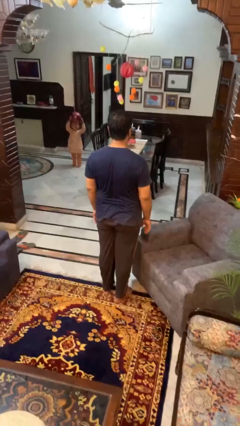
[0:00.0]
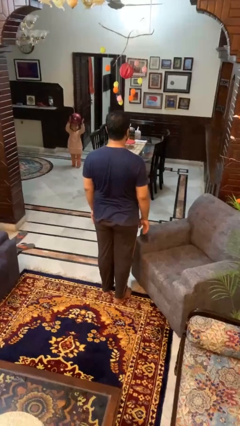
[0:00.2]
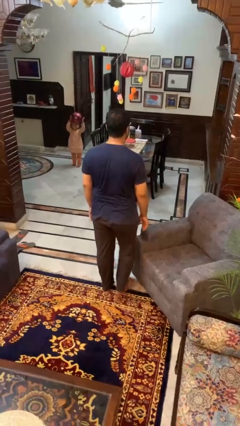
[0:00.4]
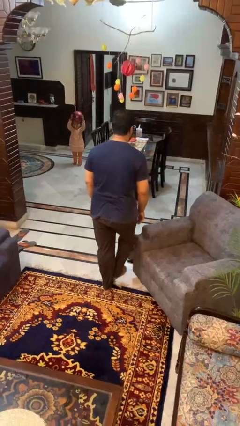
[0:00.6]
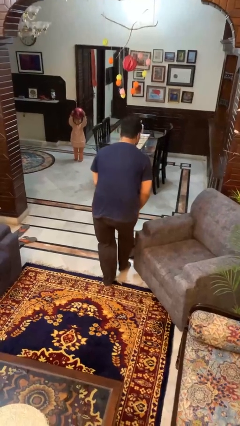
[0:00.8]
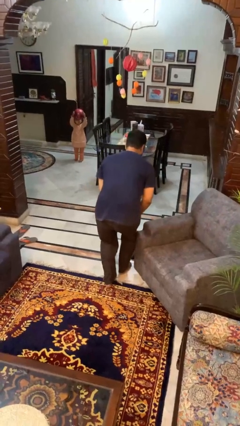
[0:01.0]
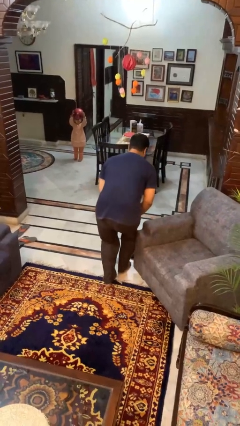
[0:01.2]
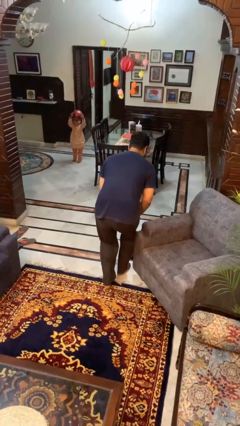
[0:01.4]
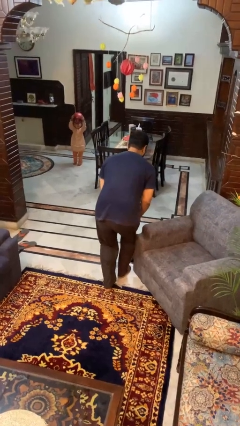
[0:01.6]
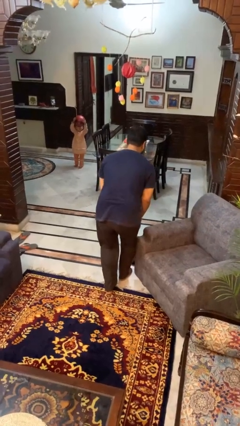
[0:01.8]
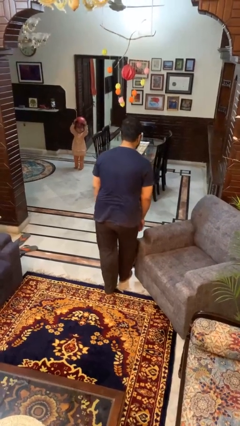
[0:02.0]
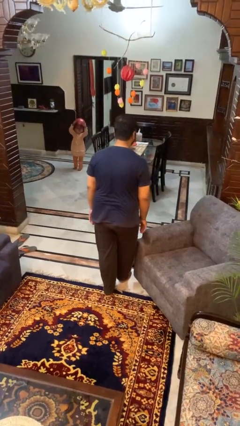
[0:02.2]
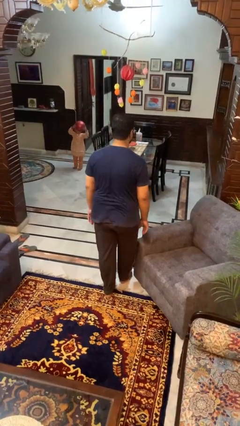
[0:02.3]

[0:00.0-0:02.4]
person stubs toe

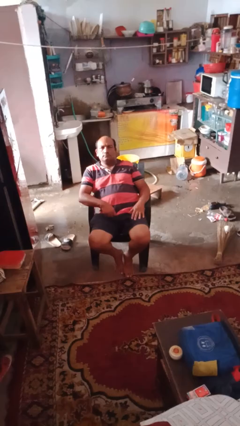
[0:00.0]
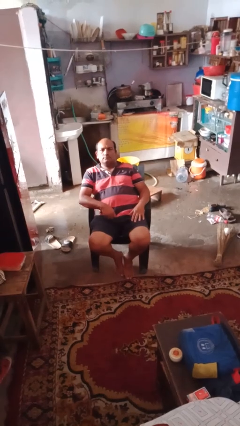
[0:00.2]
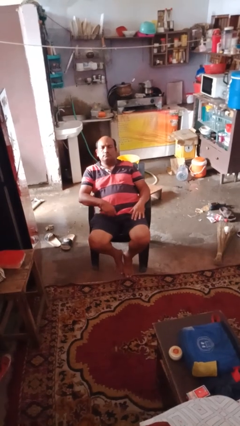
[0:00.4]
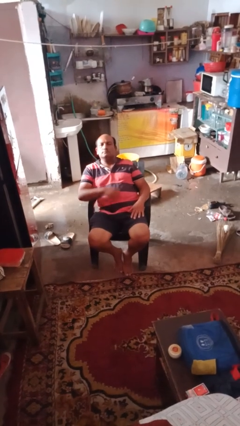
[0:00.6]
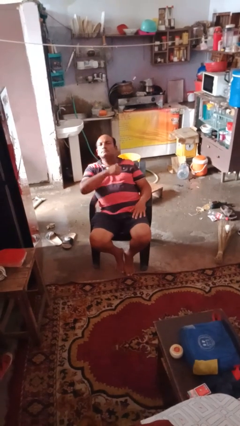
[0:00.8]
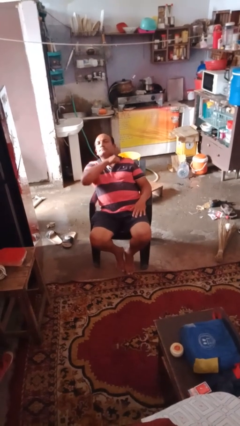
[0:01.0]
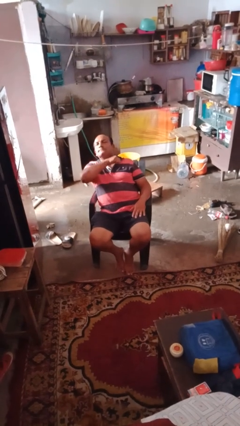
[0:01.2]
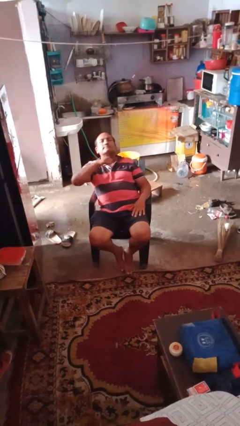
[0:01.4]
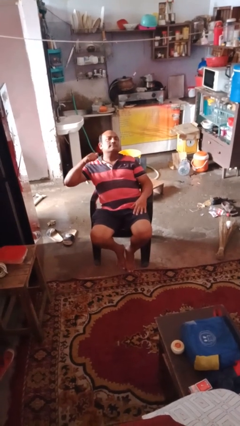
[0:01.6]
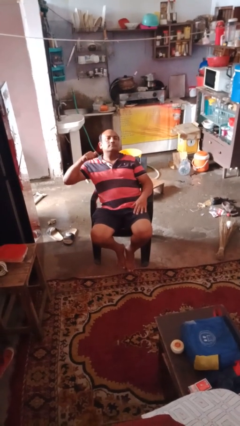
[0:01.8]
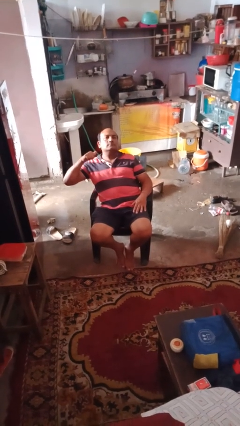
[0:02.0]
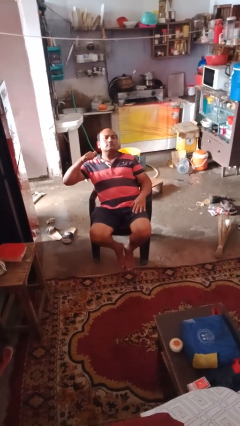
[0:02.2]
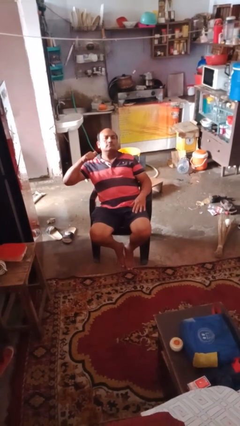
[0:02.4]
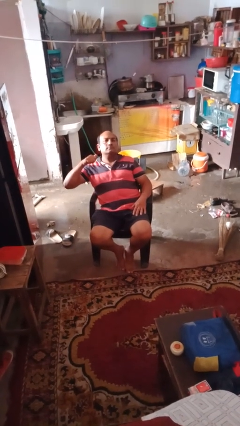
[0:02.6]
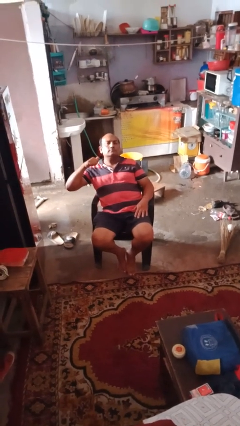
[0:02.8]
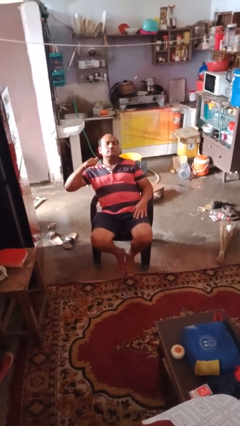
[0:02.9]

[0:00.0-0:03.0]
person gestures cut

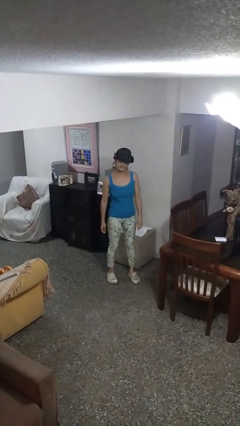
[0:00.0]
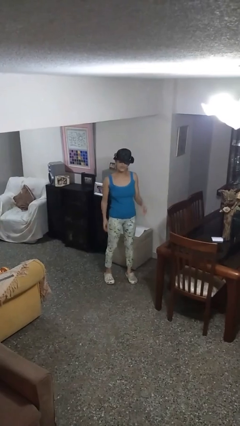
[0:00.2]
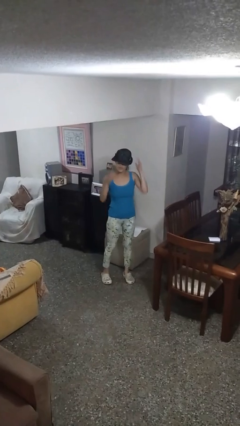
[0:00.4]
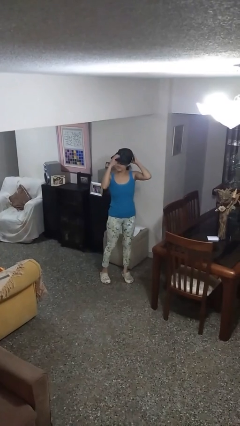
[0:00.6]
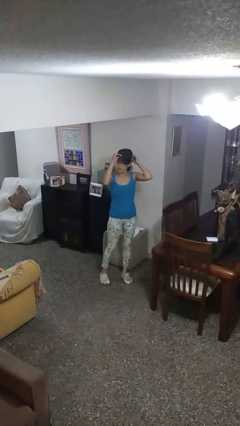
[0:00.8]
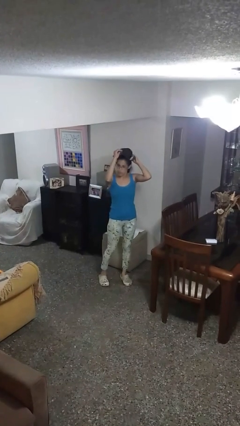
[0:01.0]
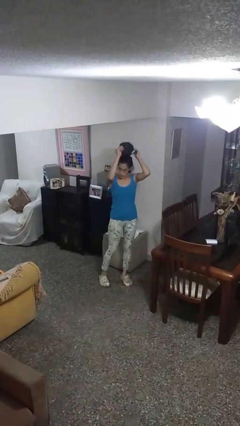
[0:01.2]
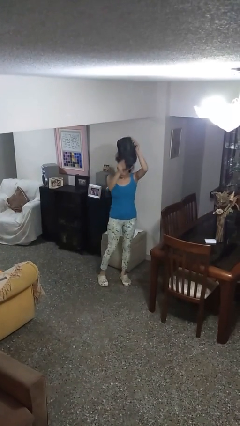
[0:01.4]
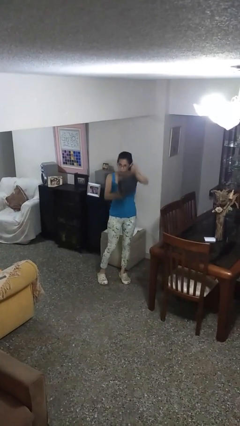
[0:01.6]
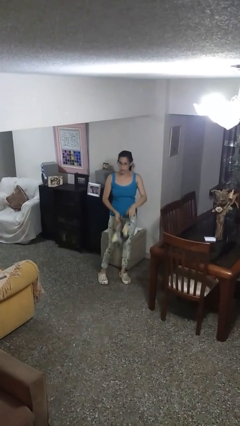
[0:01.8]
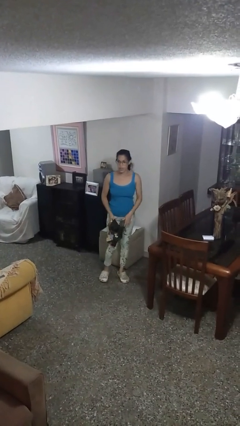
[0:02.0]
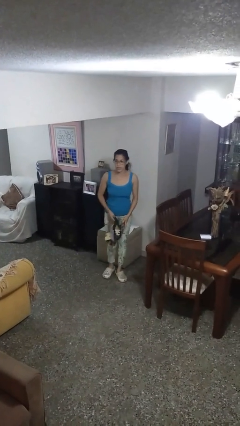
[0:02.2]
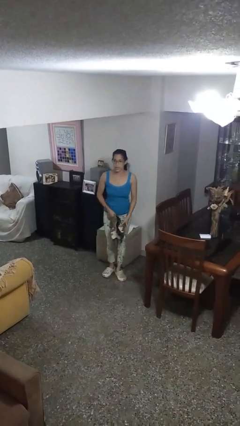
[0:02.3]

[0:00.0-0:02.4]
person takes off hat

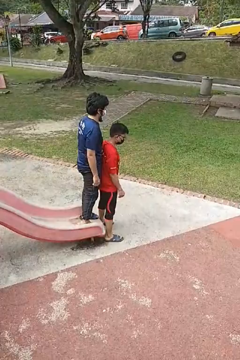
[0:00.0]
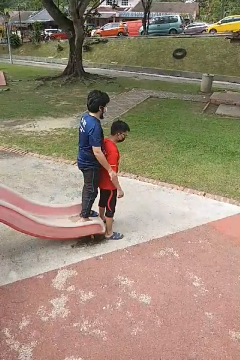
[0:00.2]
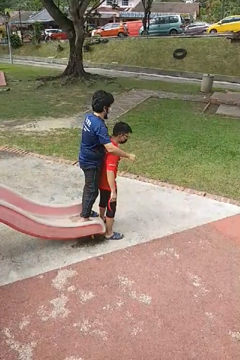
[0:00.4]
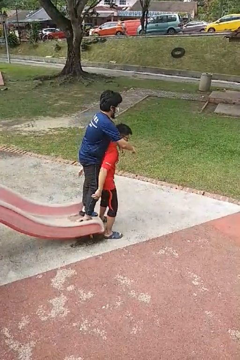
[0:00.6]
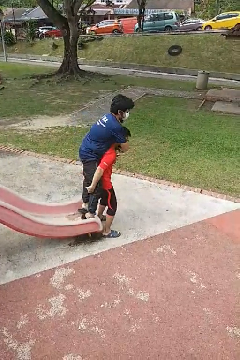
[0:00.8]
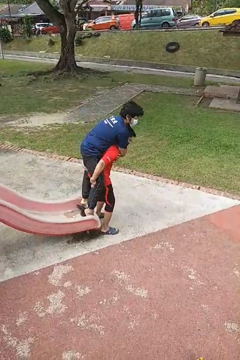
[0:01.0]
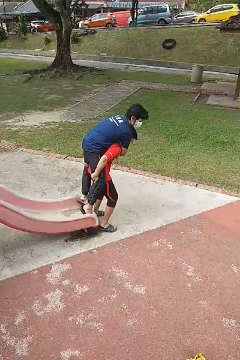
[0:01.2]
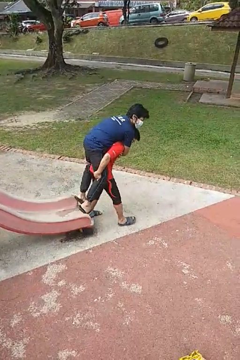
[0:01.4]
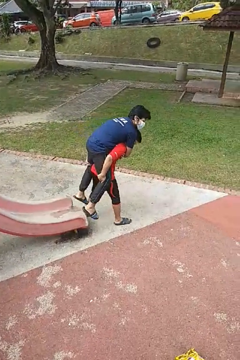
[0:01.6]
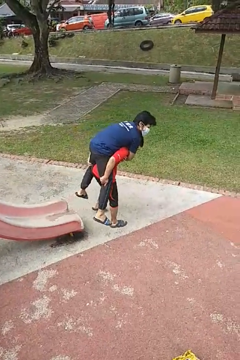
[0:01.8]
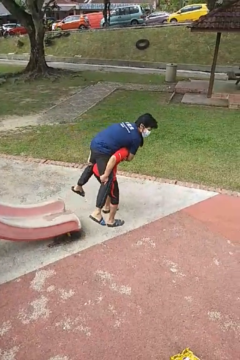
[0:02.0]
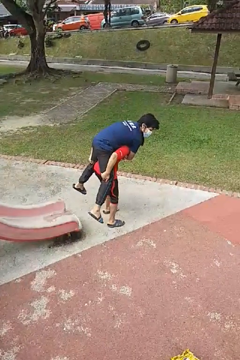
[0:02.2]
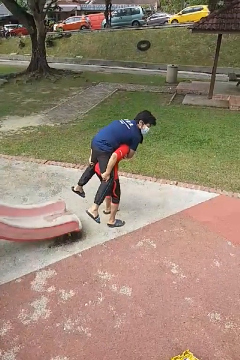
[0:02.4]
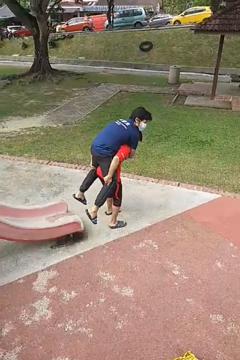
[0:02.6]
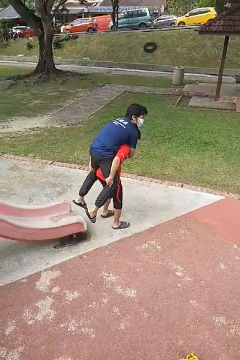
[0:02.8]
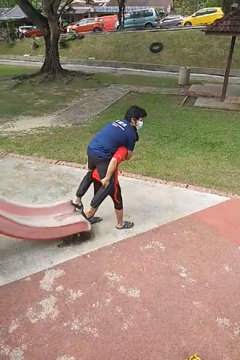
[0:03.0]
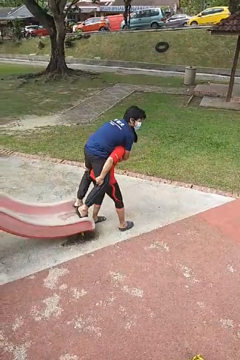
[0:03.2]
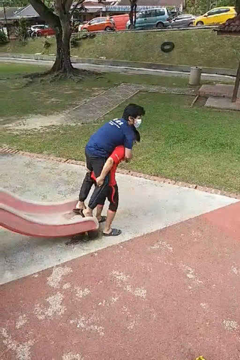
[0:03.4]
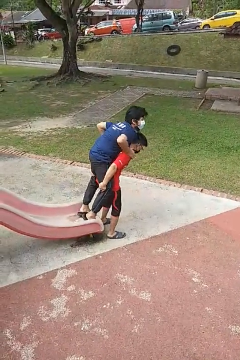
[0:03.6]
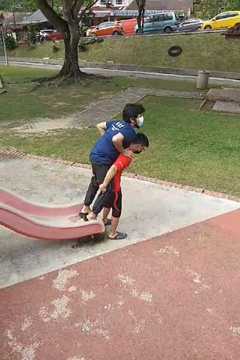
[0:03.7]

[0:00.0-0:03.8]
person carries person on back

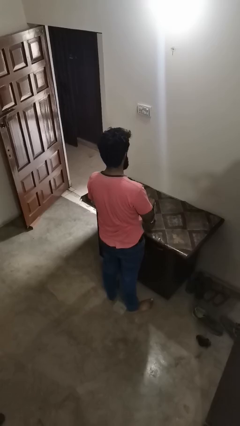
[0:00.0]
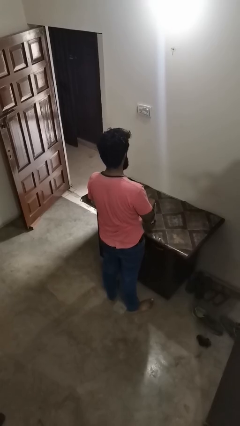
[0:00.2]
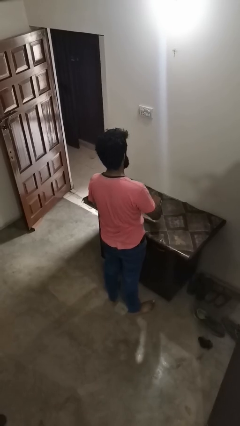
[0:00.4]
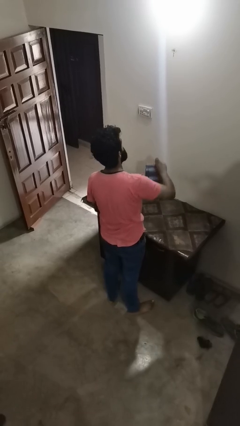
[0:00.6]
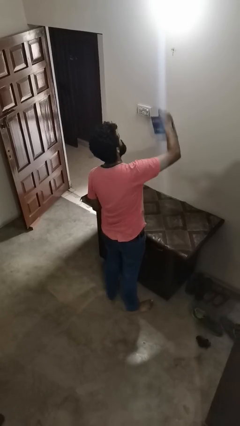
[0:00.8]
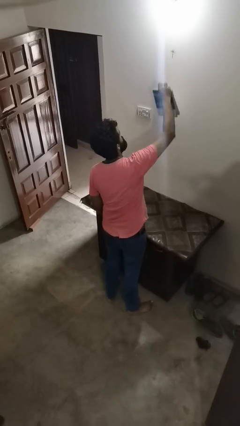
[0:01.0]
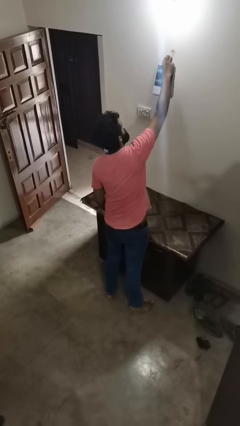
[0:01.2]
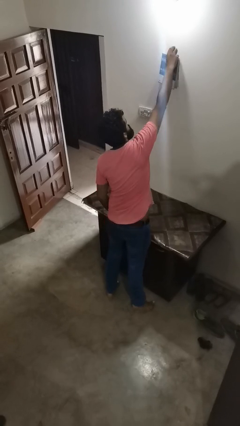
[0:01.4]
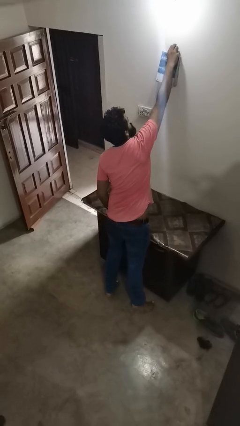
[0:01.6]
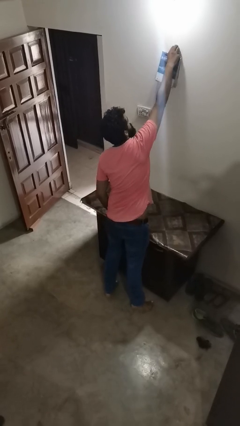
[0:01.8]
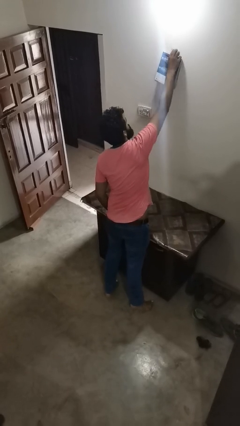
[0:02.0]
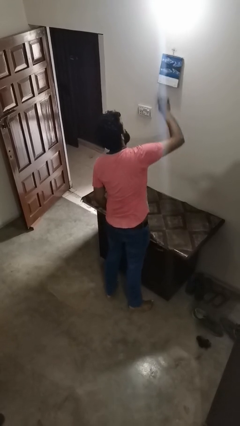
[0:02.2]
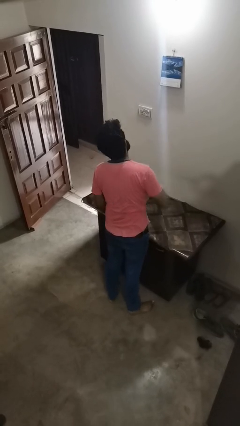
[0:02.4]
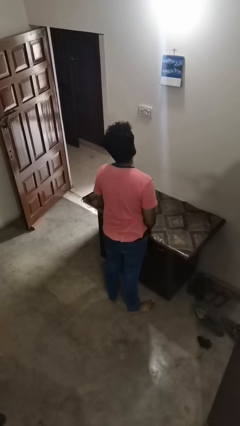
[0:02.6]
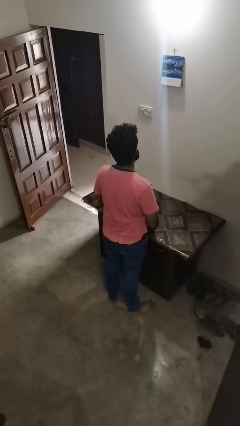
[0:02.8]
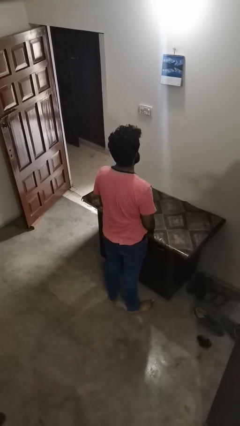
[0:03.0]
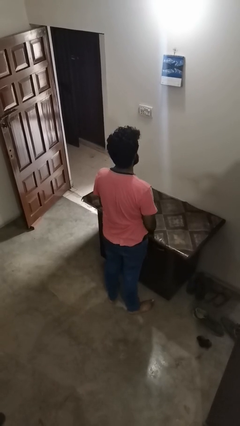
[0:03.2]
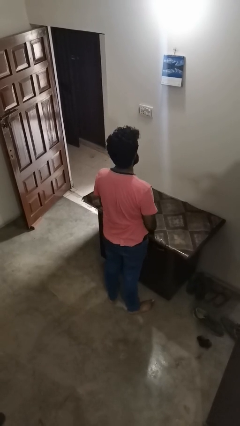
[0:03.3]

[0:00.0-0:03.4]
person puts up picture frame

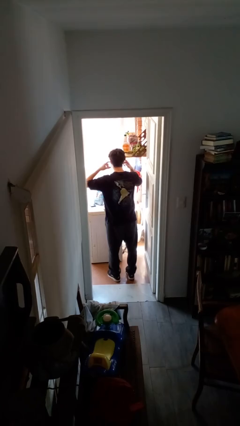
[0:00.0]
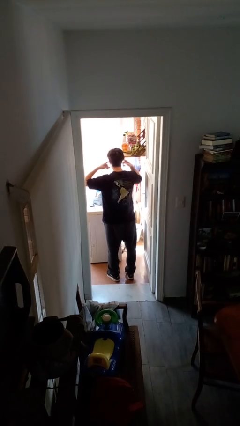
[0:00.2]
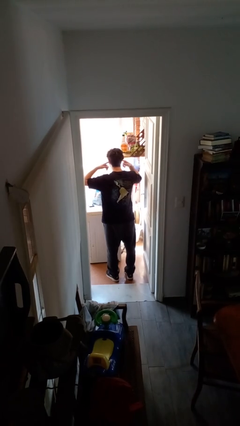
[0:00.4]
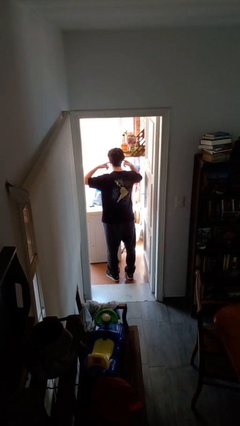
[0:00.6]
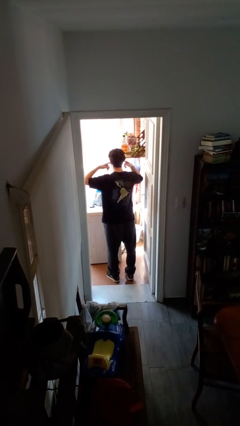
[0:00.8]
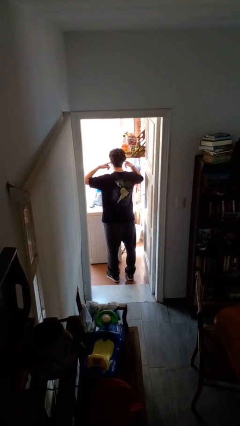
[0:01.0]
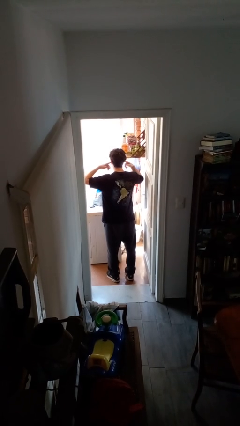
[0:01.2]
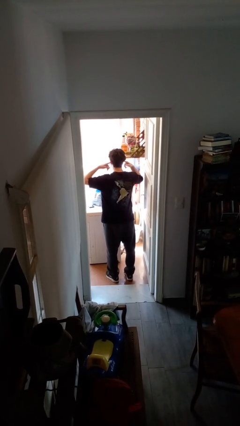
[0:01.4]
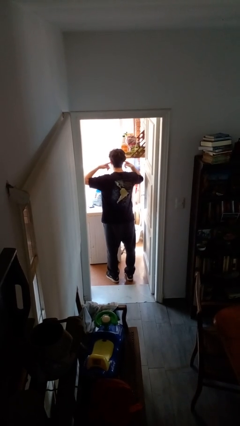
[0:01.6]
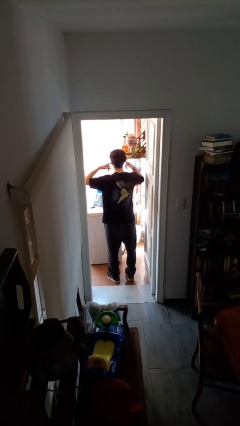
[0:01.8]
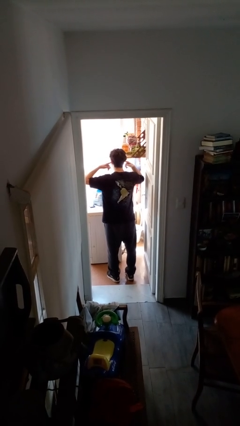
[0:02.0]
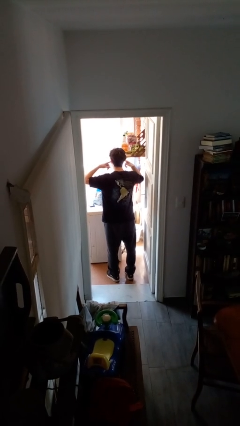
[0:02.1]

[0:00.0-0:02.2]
person puts fingers in ear

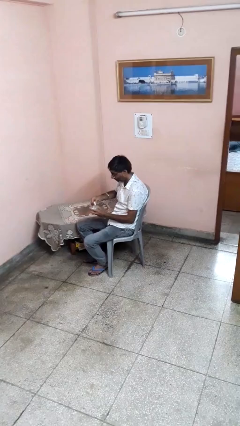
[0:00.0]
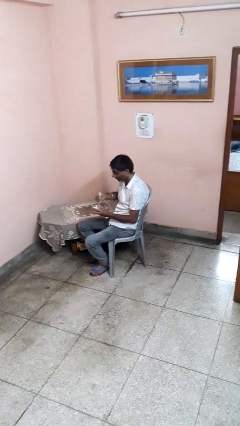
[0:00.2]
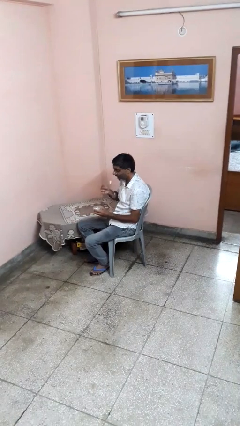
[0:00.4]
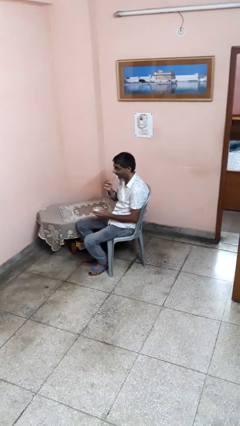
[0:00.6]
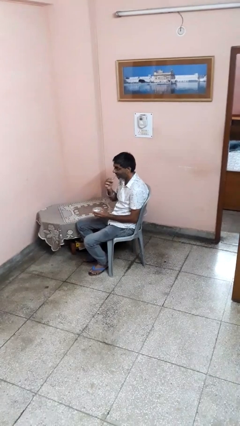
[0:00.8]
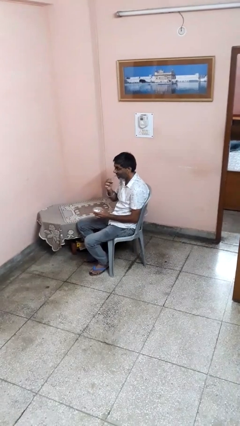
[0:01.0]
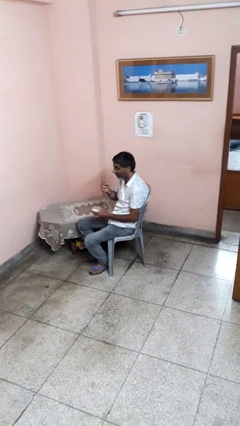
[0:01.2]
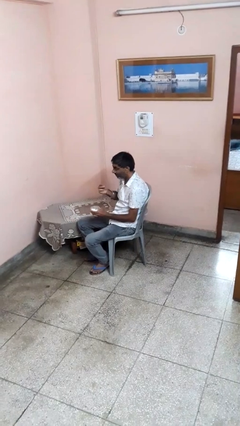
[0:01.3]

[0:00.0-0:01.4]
person eats with utensil
